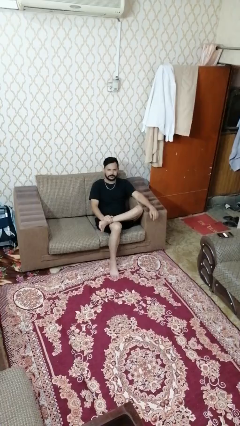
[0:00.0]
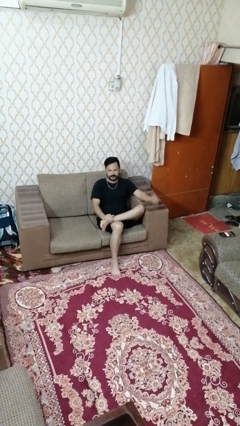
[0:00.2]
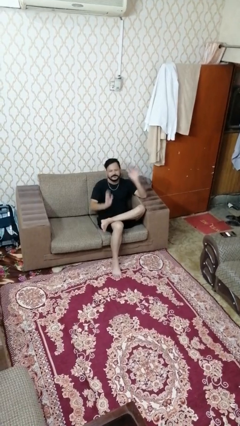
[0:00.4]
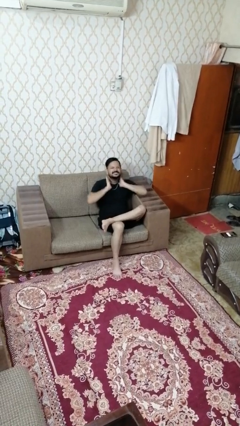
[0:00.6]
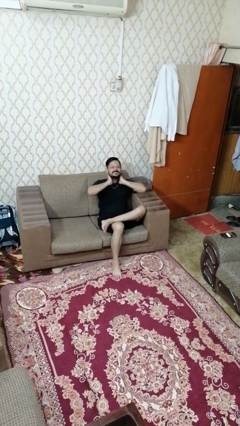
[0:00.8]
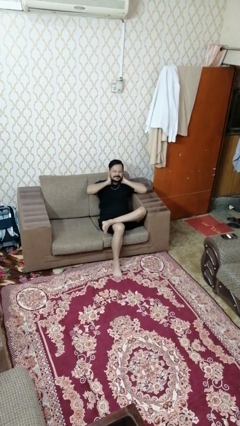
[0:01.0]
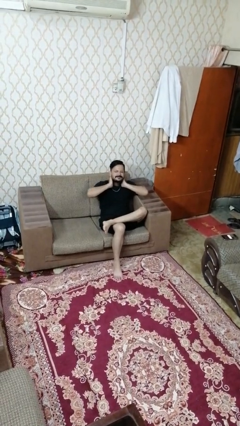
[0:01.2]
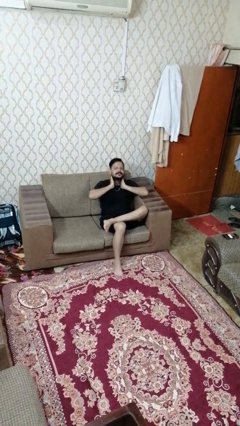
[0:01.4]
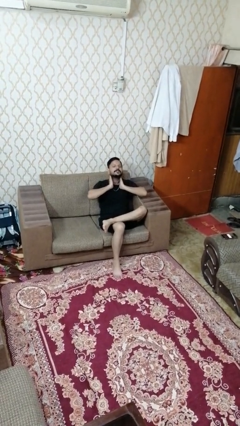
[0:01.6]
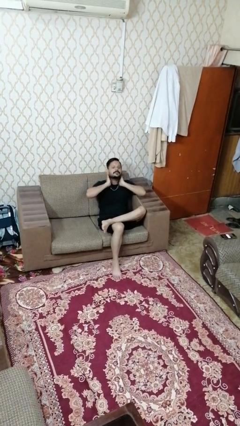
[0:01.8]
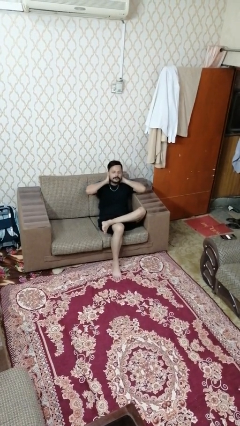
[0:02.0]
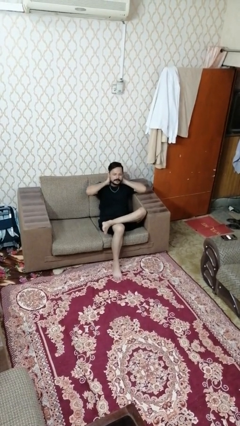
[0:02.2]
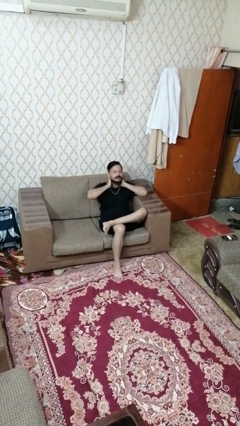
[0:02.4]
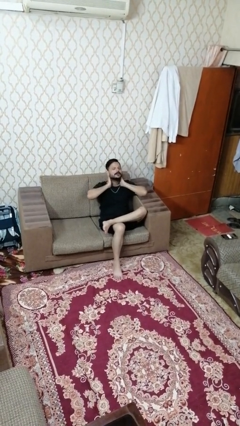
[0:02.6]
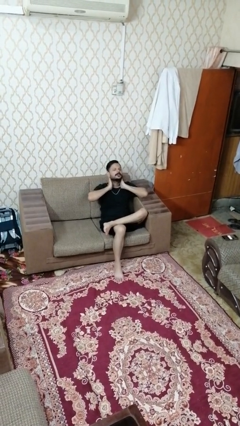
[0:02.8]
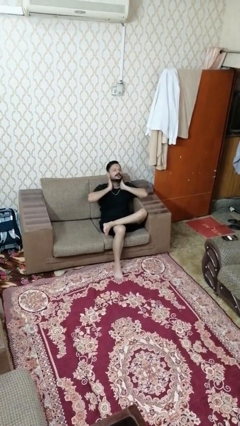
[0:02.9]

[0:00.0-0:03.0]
person rubs neck

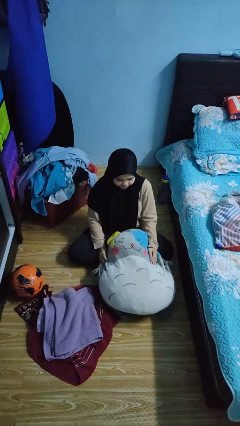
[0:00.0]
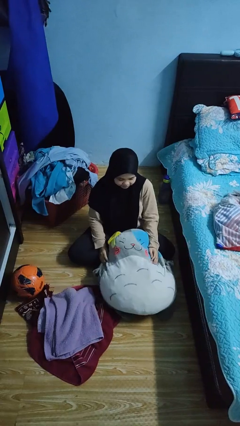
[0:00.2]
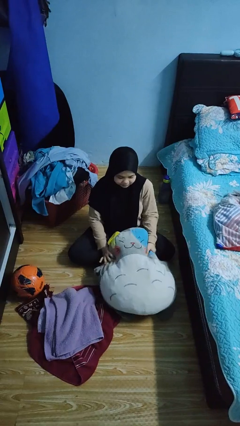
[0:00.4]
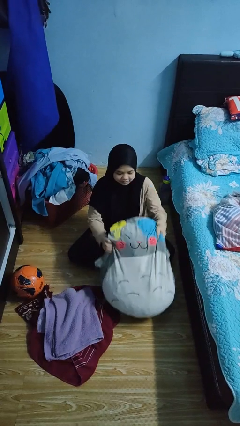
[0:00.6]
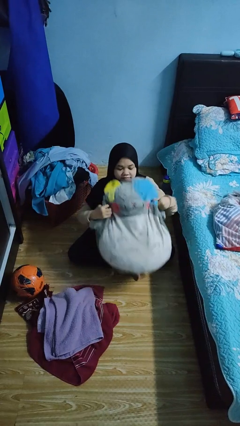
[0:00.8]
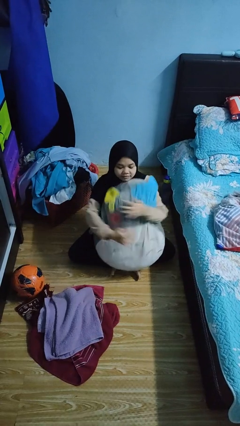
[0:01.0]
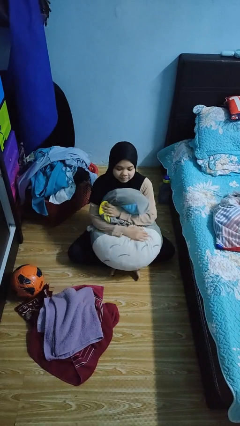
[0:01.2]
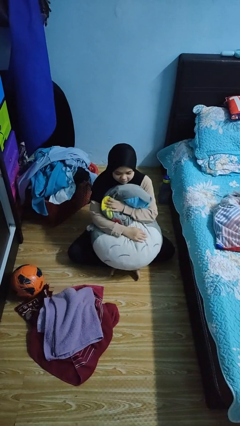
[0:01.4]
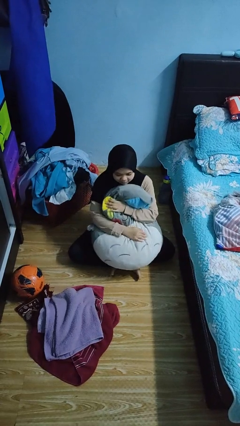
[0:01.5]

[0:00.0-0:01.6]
person hugs stuffed animal

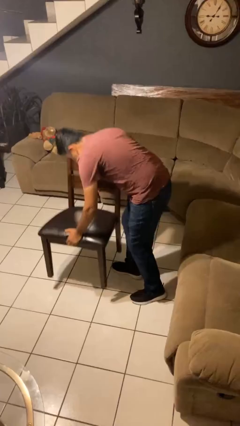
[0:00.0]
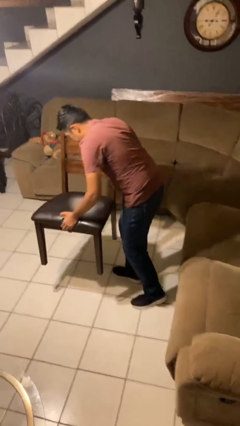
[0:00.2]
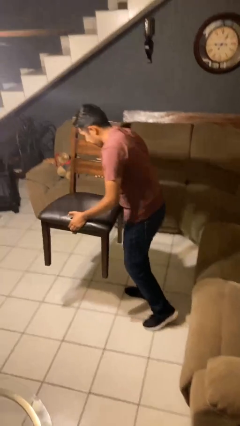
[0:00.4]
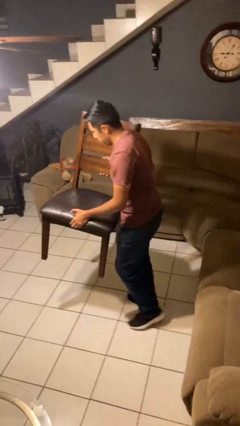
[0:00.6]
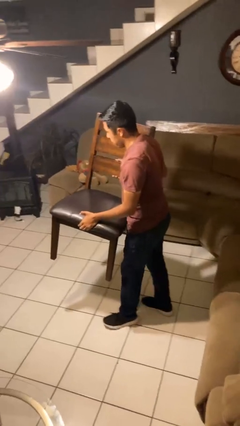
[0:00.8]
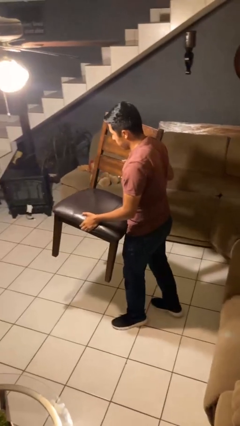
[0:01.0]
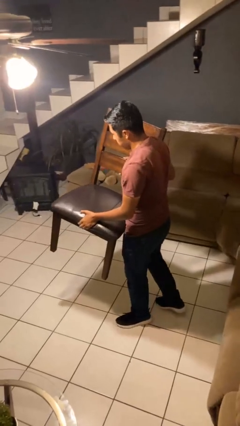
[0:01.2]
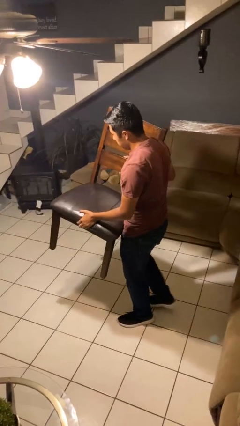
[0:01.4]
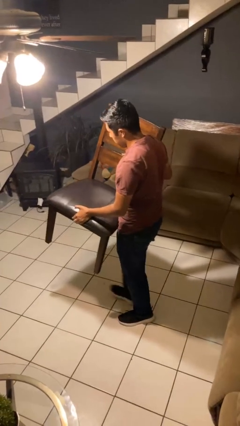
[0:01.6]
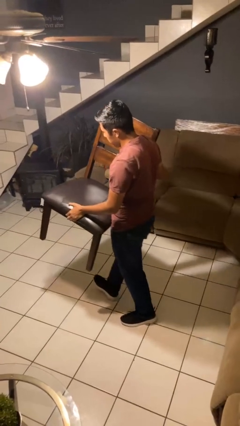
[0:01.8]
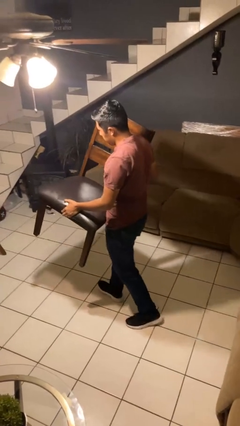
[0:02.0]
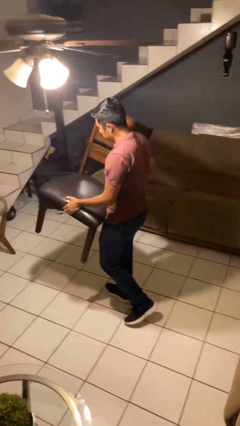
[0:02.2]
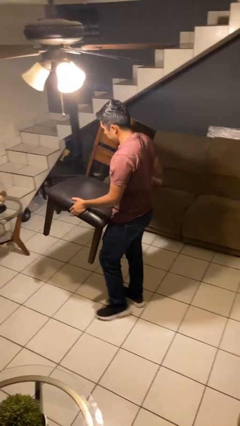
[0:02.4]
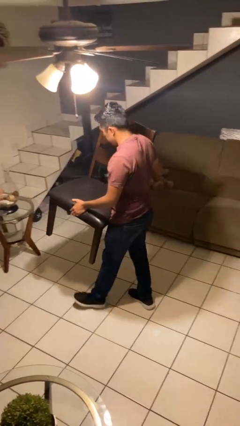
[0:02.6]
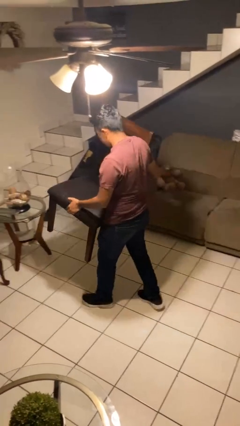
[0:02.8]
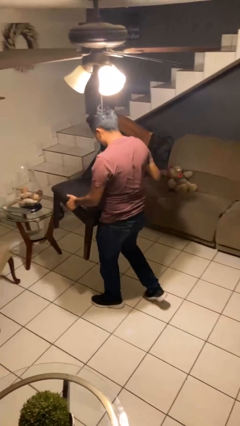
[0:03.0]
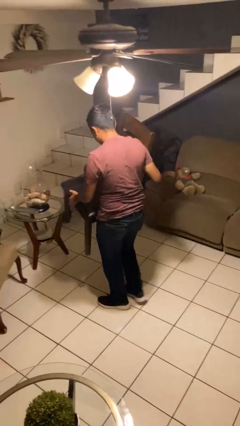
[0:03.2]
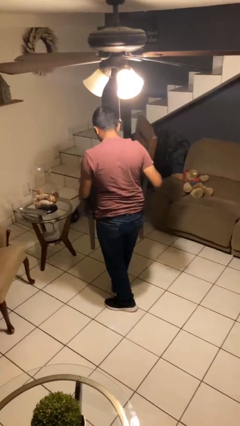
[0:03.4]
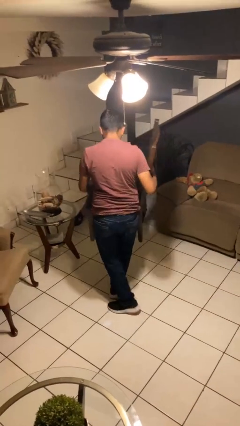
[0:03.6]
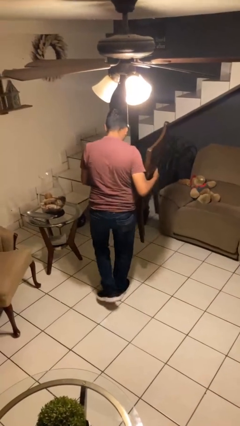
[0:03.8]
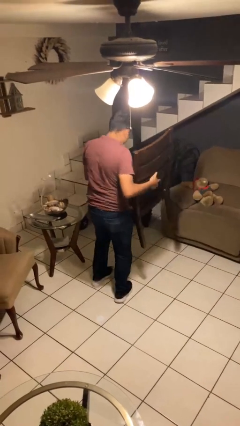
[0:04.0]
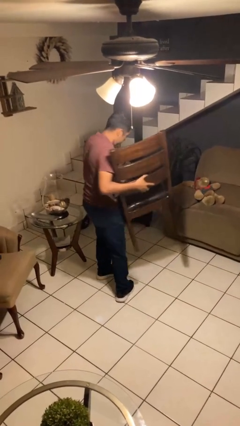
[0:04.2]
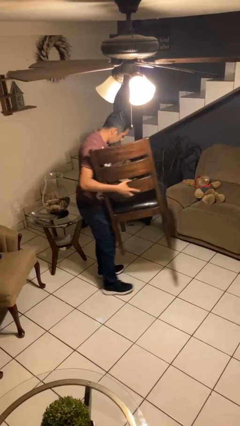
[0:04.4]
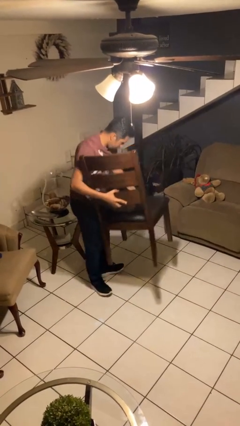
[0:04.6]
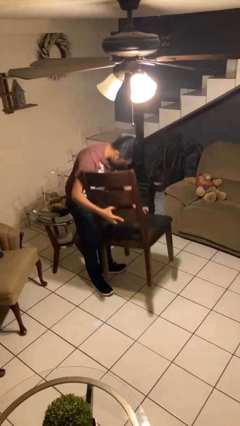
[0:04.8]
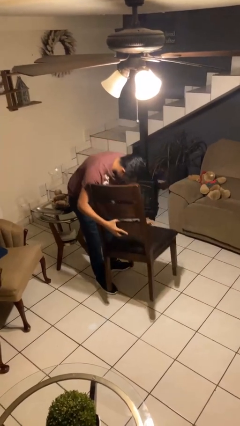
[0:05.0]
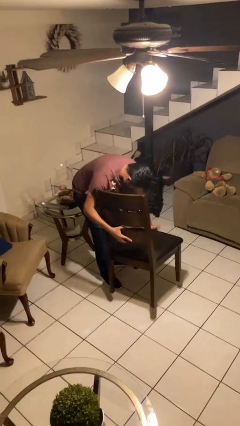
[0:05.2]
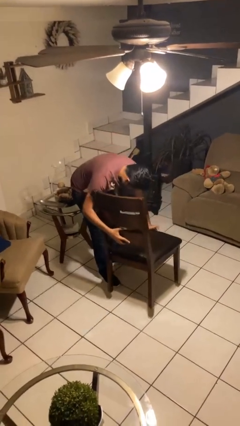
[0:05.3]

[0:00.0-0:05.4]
person carries furniture

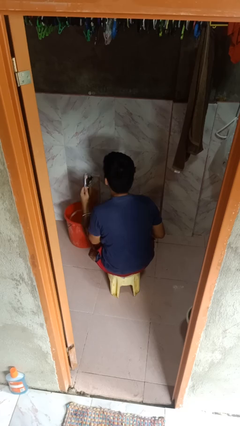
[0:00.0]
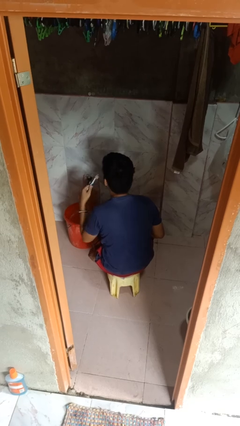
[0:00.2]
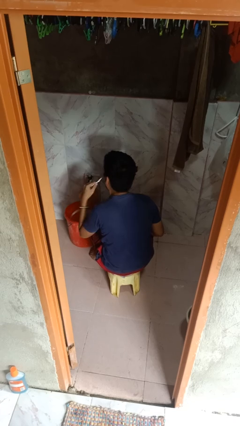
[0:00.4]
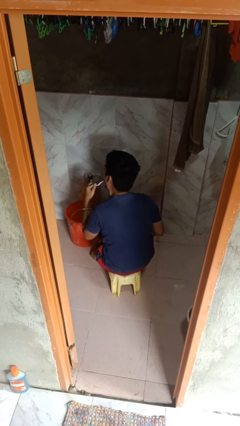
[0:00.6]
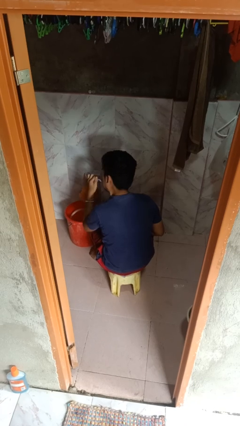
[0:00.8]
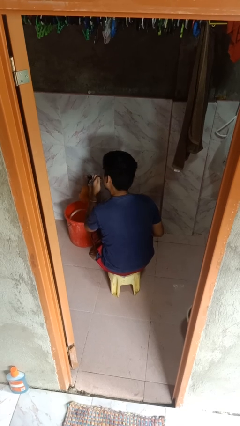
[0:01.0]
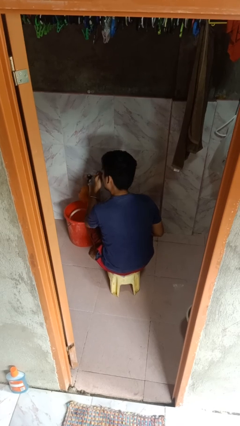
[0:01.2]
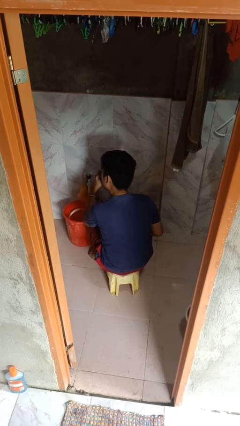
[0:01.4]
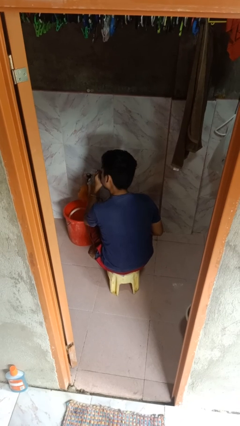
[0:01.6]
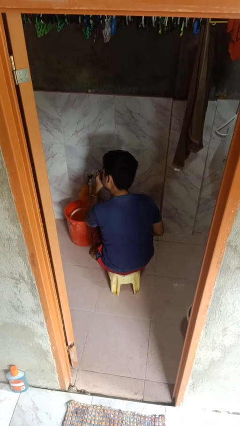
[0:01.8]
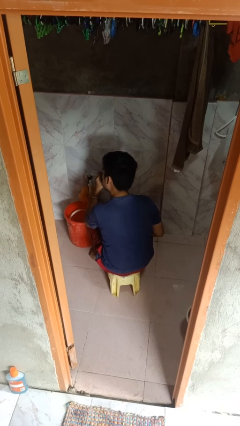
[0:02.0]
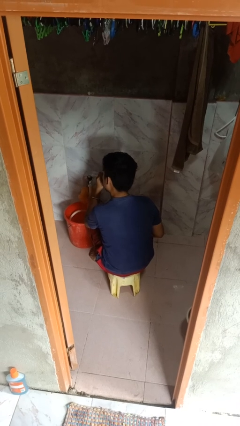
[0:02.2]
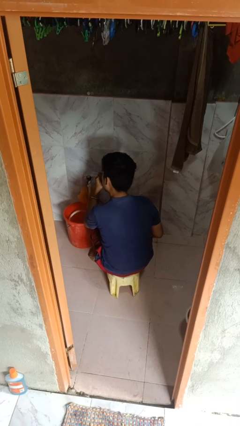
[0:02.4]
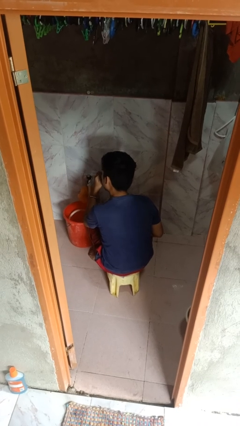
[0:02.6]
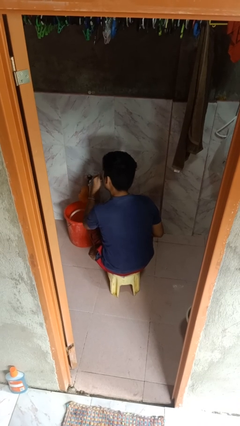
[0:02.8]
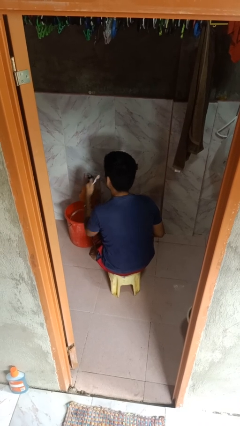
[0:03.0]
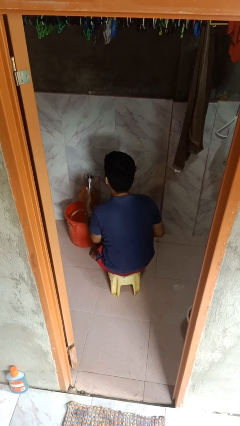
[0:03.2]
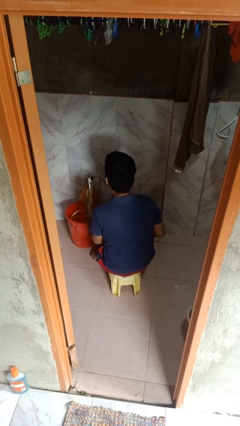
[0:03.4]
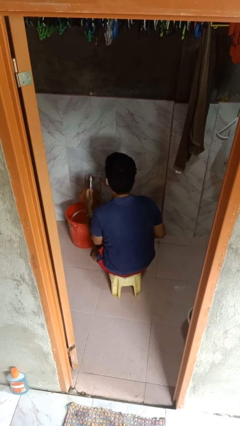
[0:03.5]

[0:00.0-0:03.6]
person brushes teeth

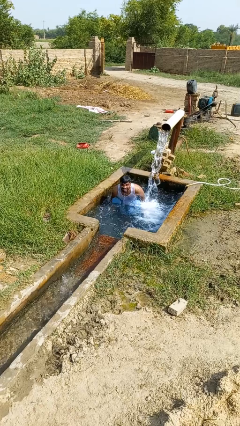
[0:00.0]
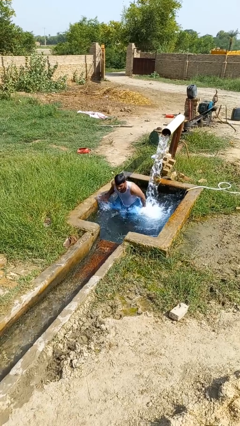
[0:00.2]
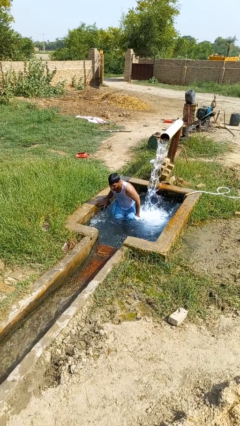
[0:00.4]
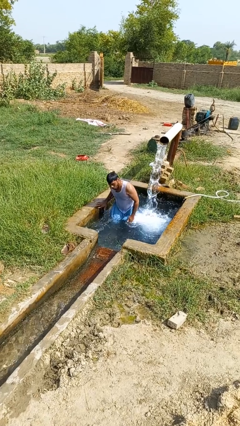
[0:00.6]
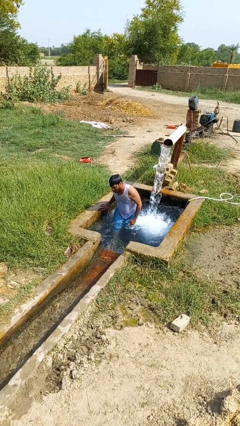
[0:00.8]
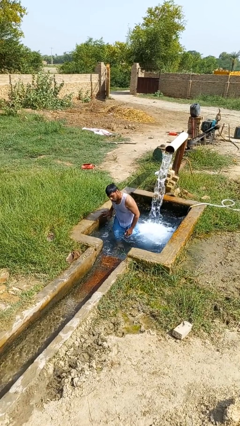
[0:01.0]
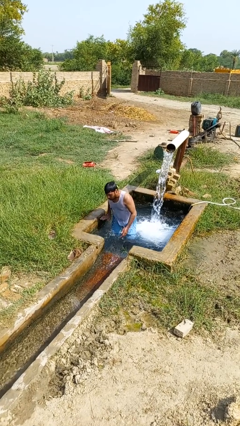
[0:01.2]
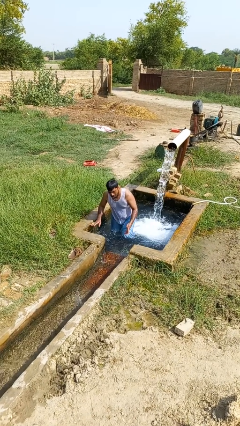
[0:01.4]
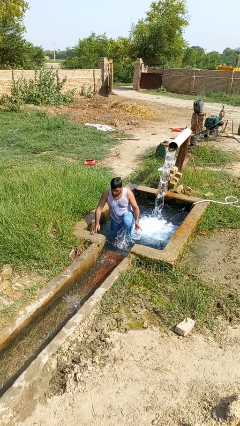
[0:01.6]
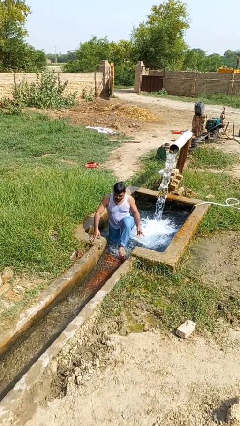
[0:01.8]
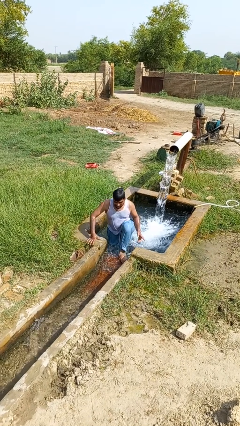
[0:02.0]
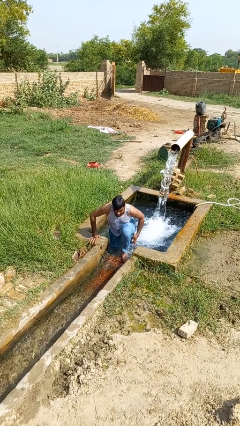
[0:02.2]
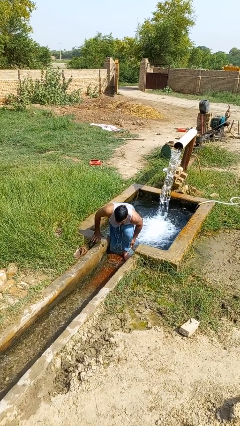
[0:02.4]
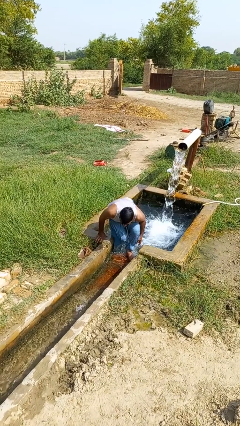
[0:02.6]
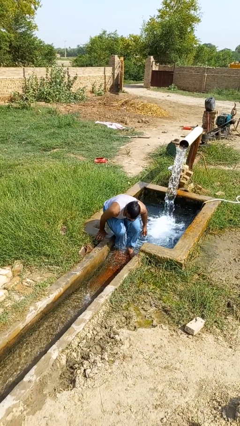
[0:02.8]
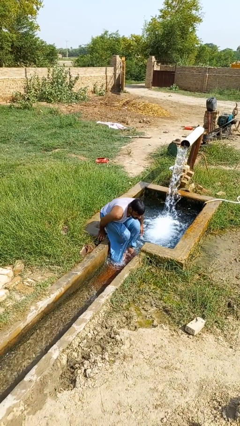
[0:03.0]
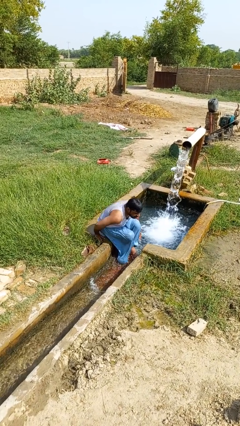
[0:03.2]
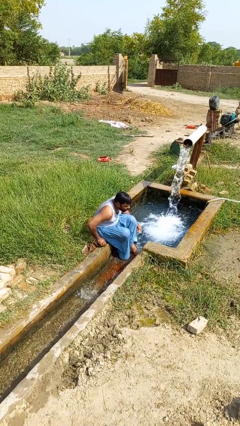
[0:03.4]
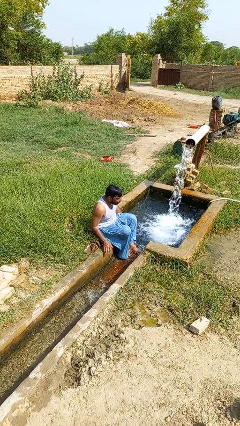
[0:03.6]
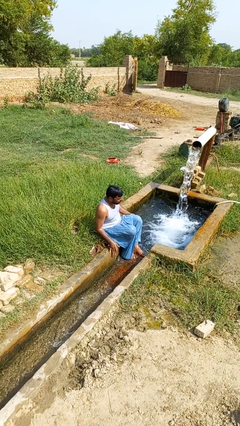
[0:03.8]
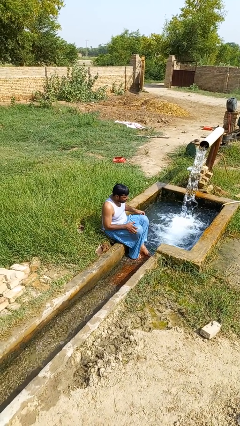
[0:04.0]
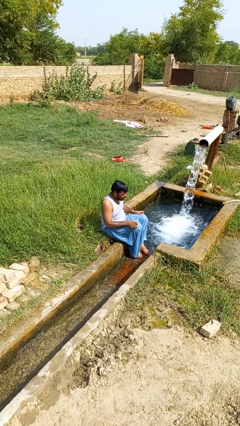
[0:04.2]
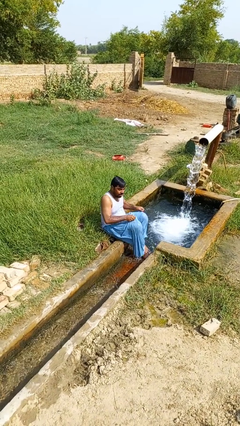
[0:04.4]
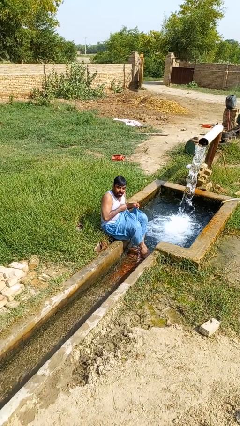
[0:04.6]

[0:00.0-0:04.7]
person exits pool
